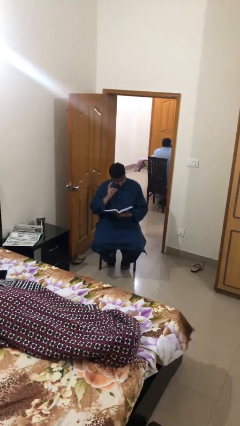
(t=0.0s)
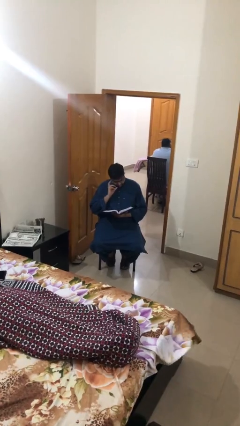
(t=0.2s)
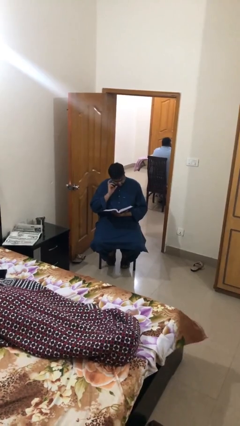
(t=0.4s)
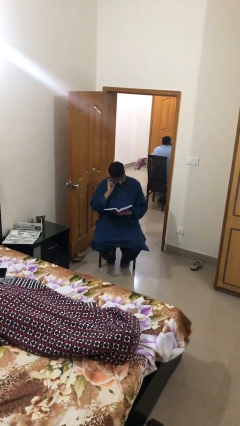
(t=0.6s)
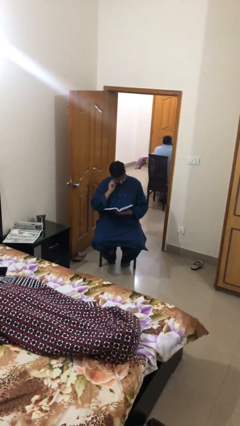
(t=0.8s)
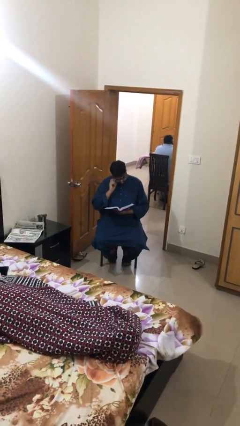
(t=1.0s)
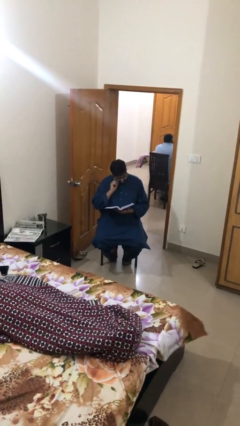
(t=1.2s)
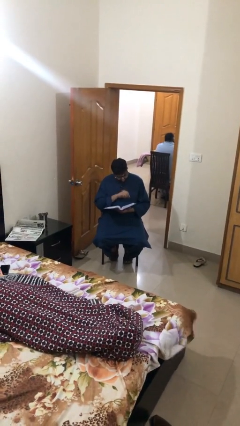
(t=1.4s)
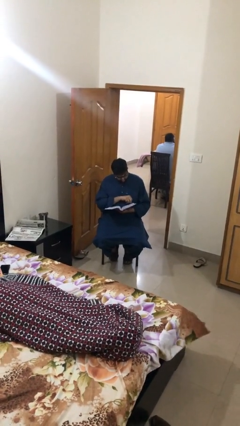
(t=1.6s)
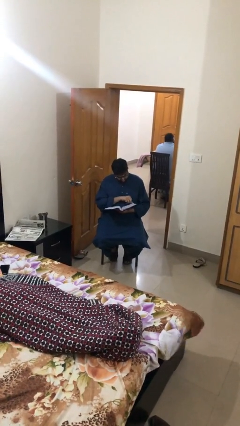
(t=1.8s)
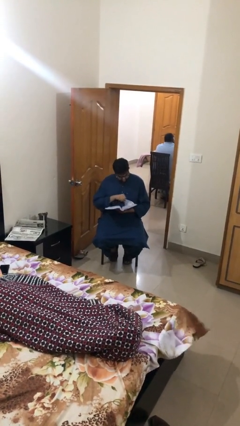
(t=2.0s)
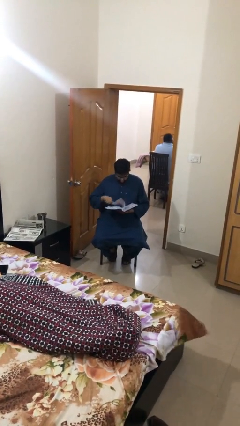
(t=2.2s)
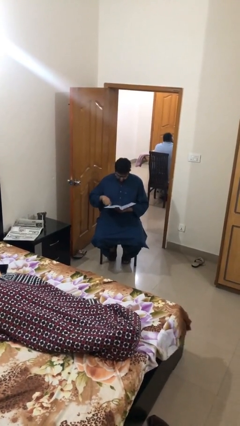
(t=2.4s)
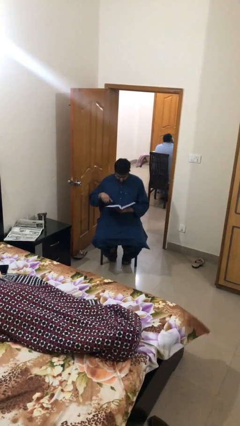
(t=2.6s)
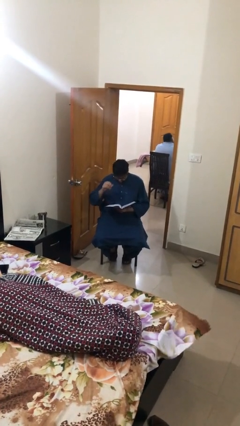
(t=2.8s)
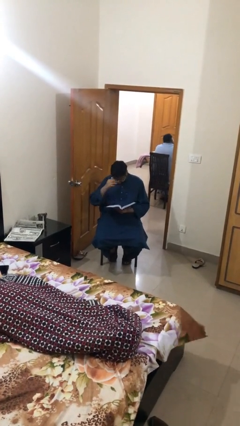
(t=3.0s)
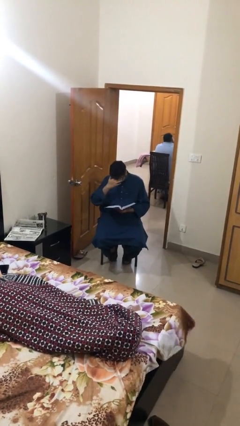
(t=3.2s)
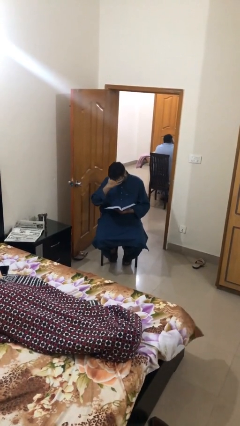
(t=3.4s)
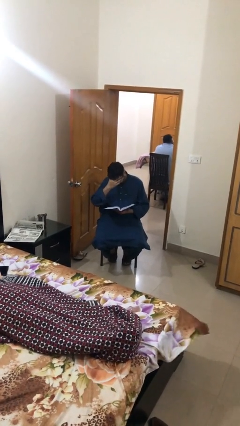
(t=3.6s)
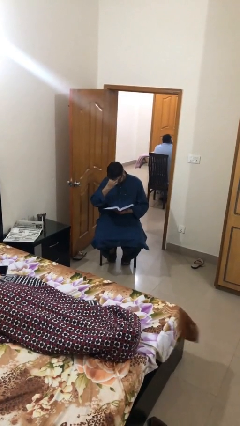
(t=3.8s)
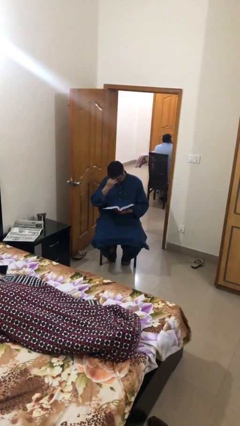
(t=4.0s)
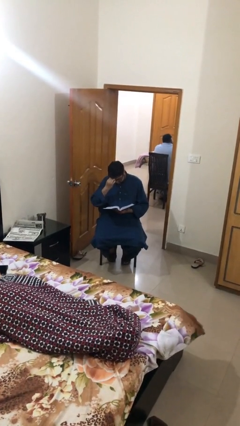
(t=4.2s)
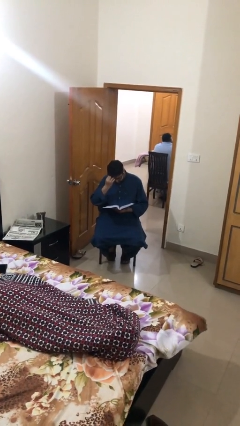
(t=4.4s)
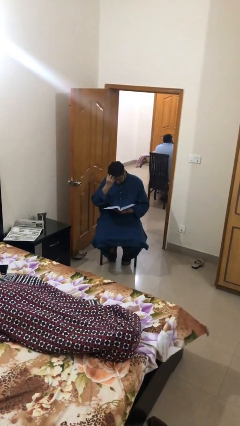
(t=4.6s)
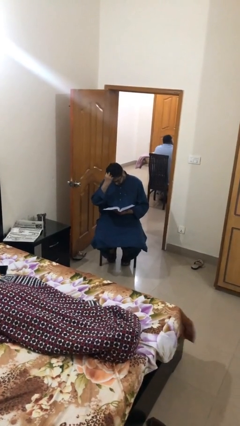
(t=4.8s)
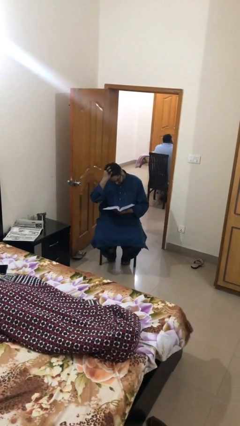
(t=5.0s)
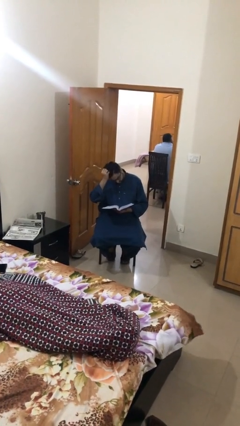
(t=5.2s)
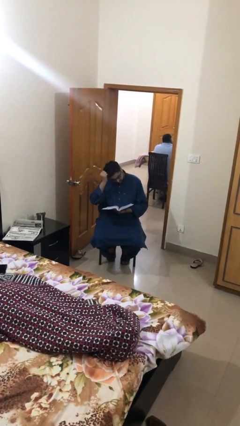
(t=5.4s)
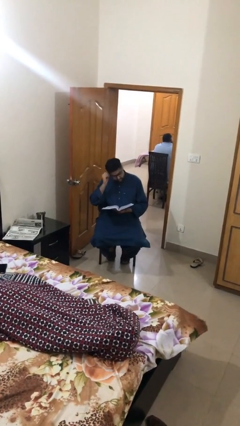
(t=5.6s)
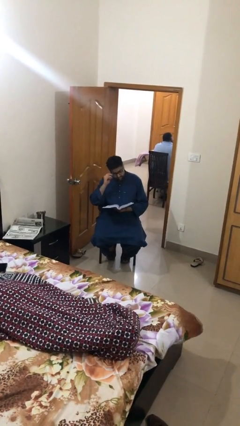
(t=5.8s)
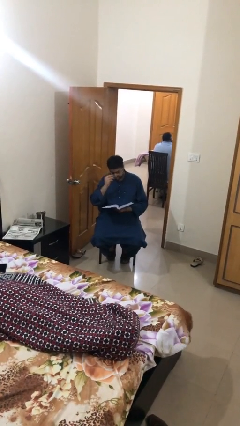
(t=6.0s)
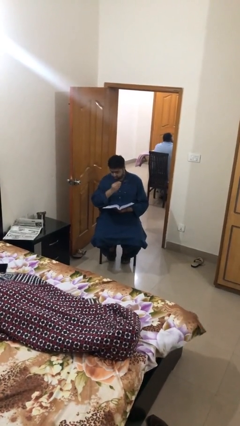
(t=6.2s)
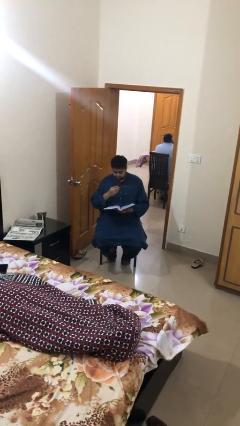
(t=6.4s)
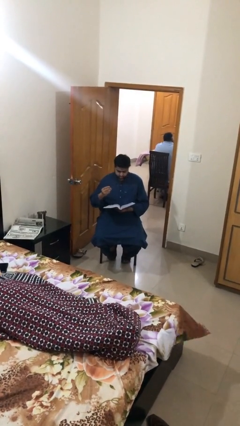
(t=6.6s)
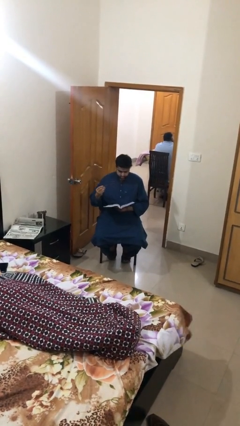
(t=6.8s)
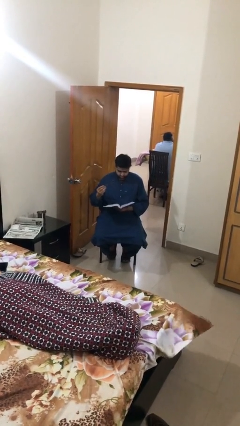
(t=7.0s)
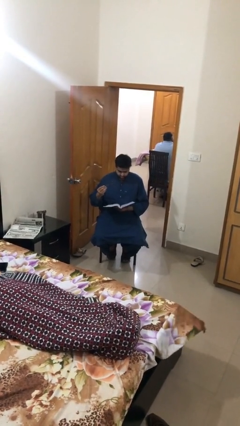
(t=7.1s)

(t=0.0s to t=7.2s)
person reads document

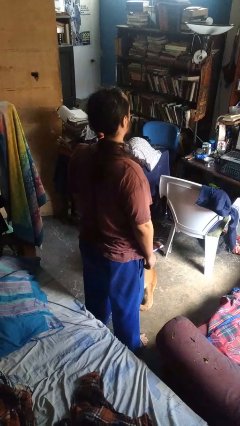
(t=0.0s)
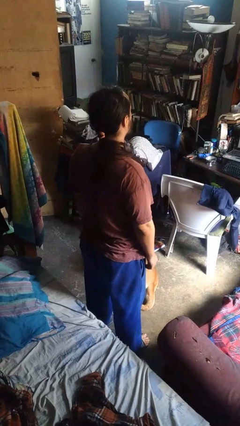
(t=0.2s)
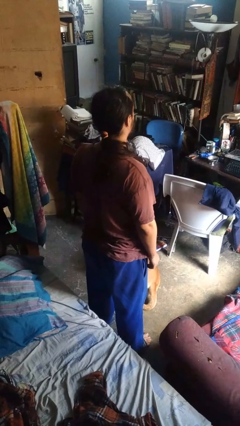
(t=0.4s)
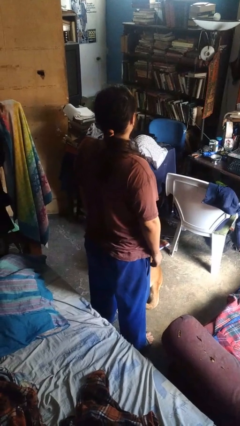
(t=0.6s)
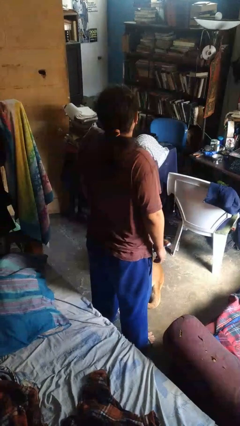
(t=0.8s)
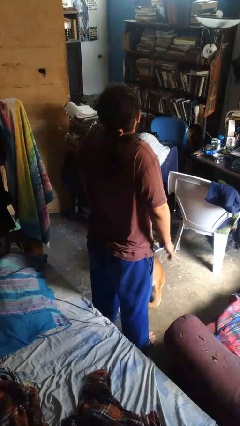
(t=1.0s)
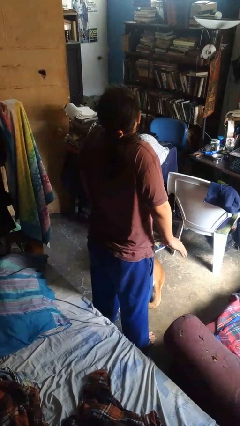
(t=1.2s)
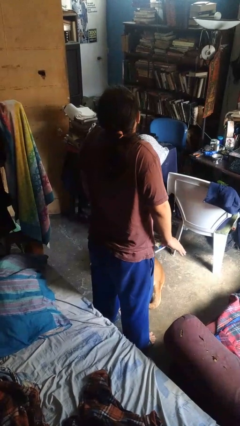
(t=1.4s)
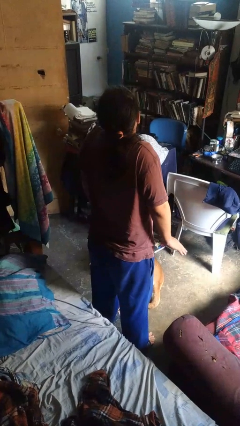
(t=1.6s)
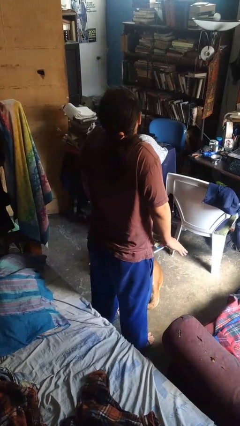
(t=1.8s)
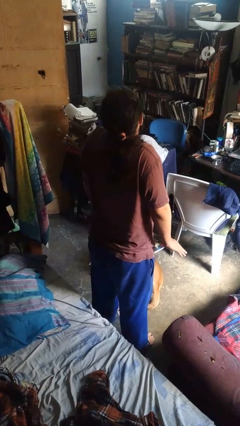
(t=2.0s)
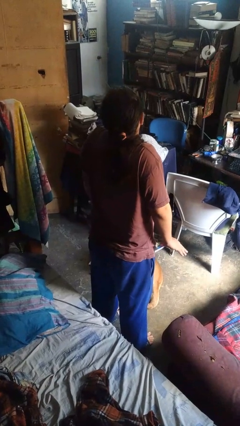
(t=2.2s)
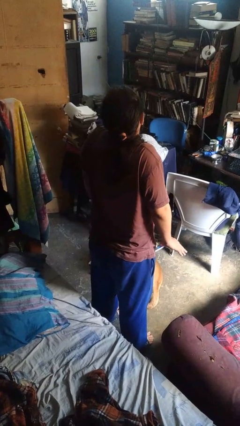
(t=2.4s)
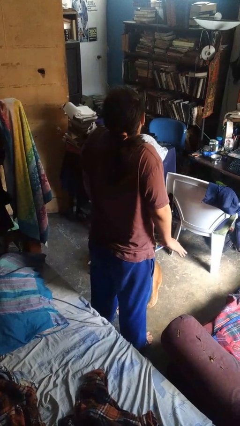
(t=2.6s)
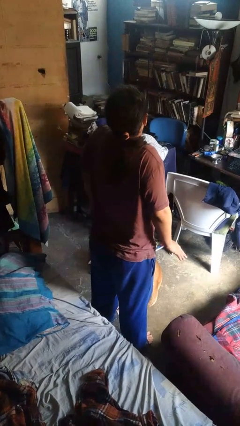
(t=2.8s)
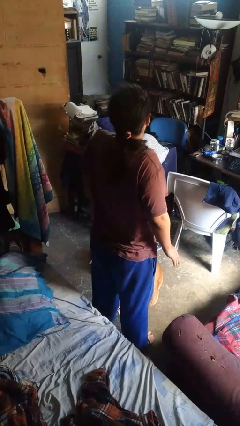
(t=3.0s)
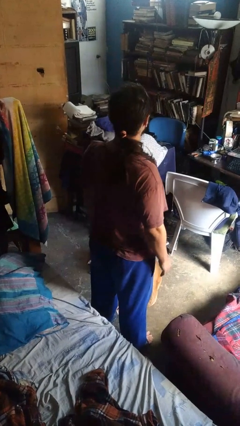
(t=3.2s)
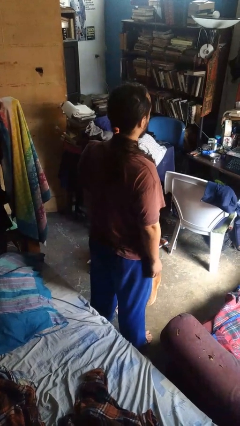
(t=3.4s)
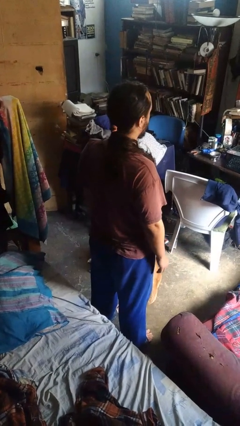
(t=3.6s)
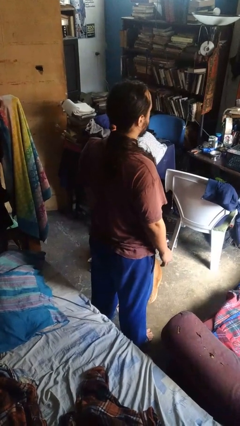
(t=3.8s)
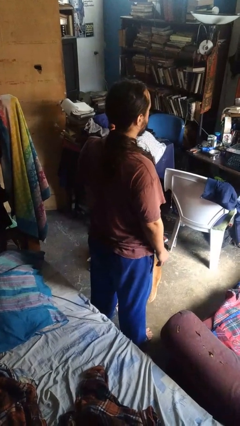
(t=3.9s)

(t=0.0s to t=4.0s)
person shrugs

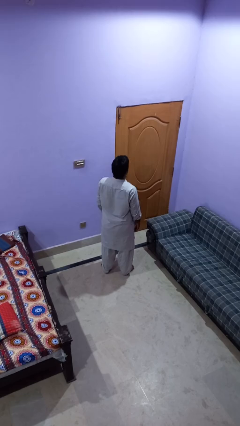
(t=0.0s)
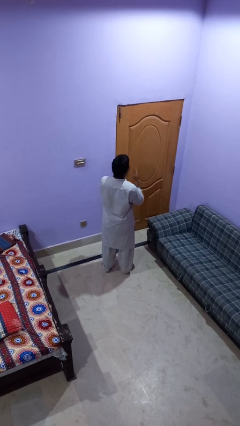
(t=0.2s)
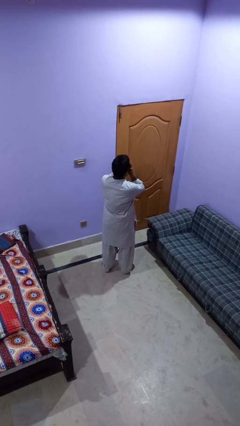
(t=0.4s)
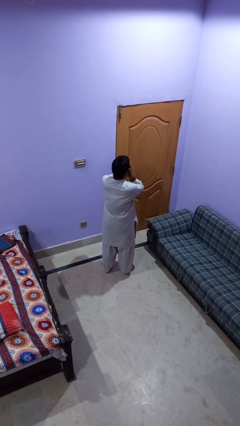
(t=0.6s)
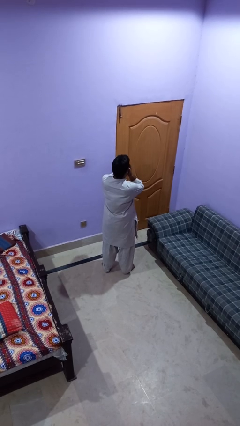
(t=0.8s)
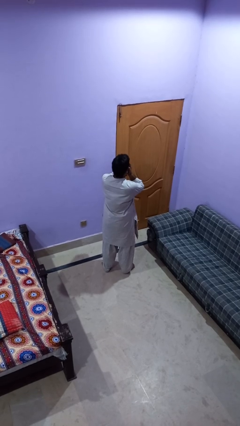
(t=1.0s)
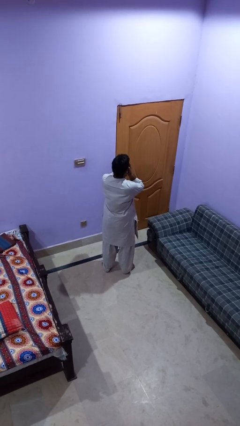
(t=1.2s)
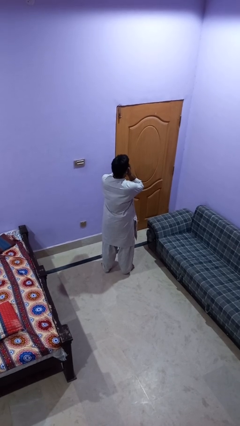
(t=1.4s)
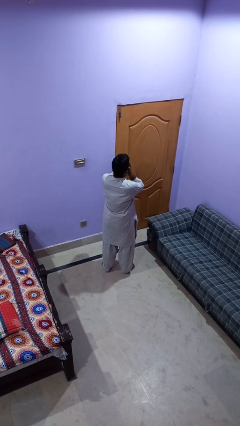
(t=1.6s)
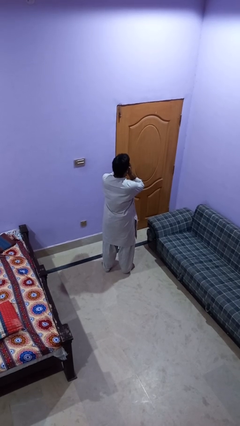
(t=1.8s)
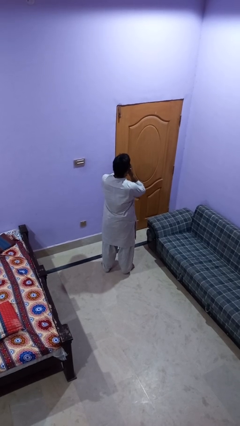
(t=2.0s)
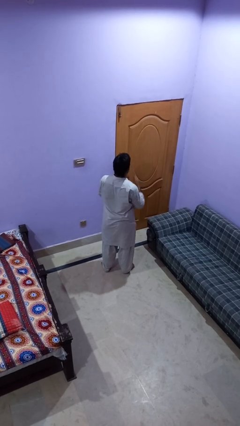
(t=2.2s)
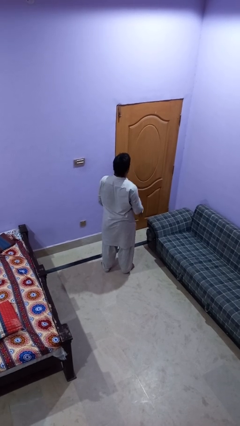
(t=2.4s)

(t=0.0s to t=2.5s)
person covers face with hands

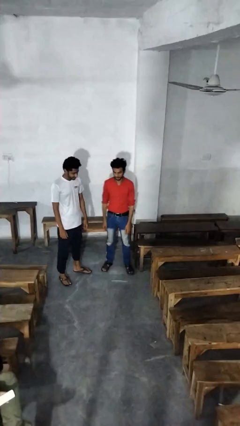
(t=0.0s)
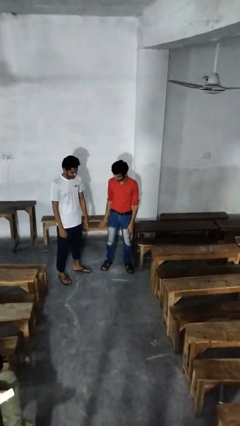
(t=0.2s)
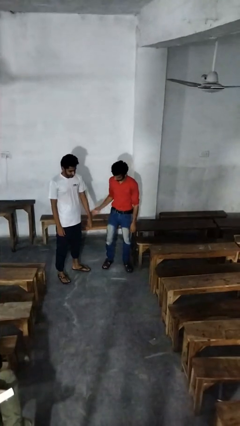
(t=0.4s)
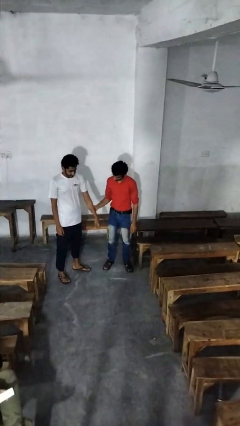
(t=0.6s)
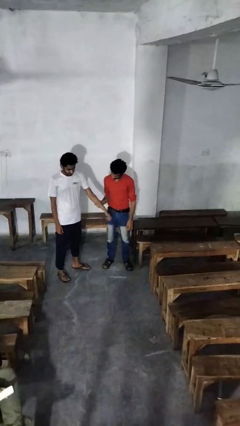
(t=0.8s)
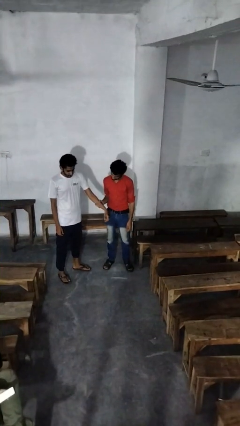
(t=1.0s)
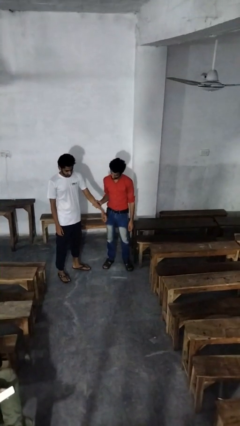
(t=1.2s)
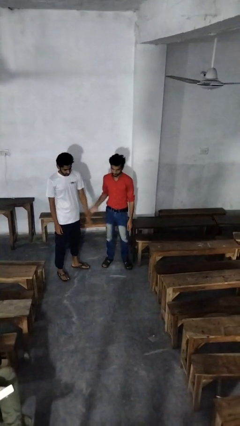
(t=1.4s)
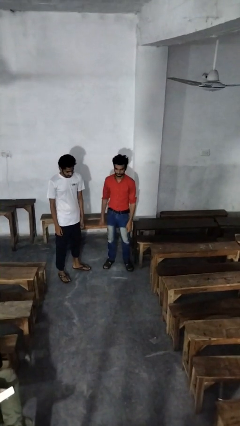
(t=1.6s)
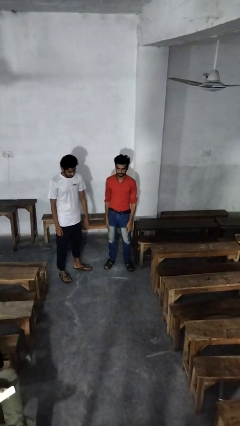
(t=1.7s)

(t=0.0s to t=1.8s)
person grabs person by forearm

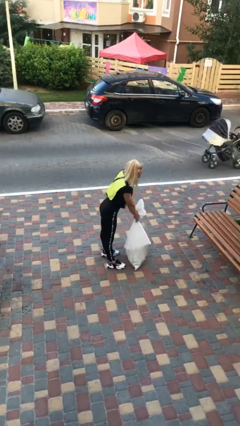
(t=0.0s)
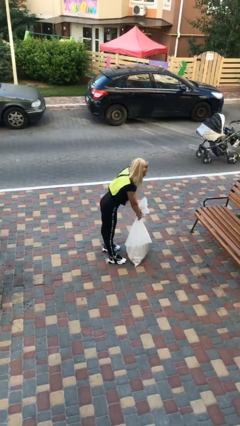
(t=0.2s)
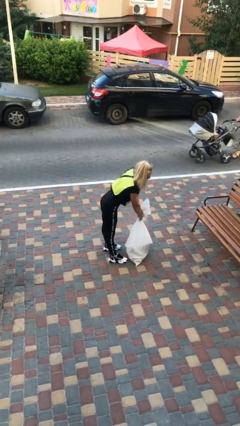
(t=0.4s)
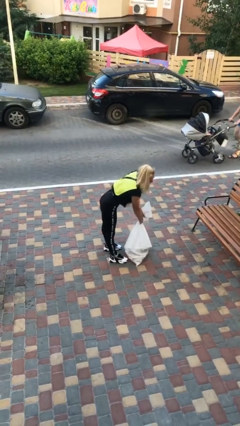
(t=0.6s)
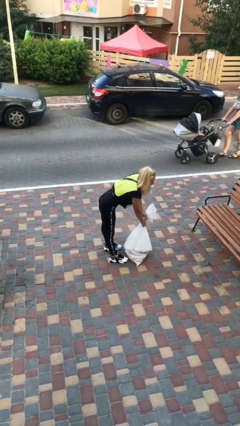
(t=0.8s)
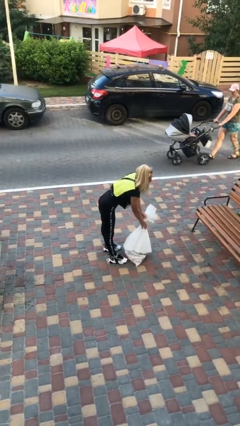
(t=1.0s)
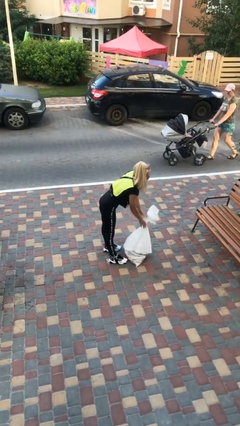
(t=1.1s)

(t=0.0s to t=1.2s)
person puts down object on floor

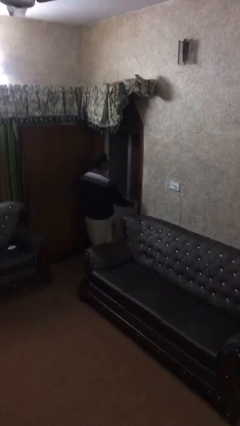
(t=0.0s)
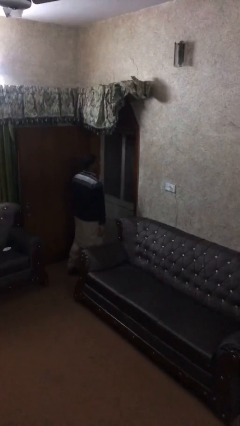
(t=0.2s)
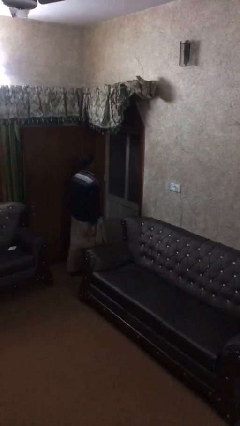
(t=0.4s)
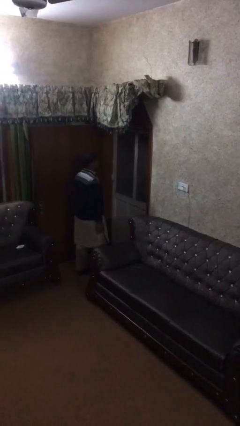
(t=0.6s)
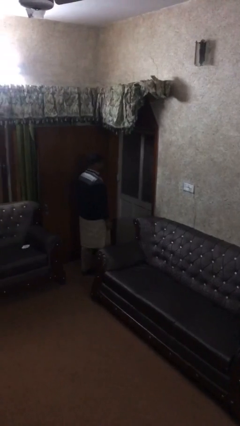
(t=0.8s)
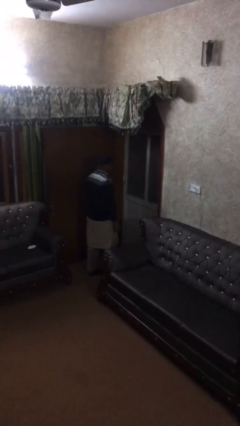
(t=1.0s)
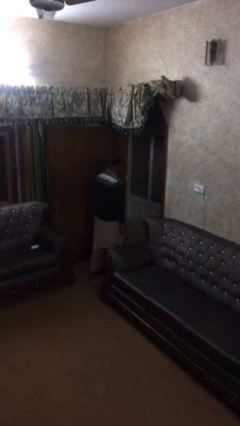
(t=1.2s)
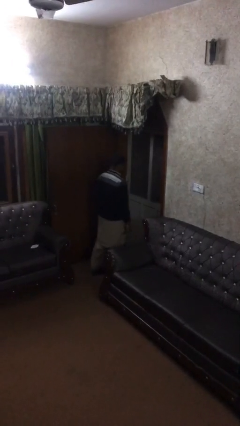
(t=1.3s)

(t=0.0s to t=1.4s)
person closes facility door
